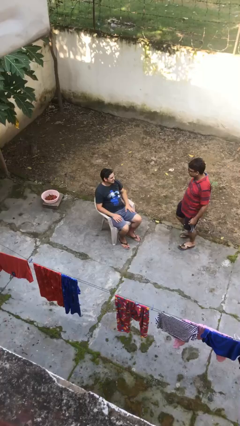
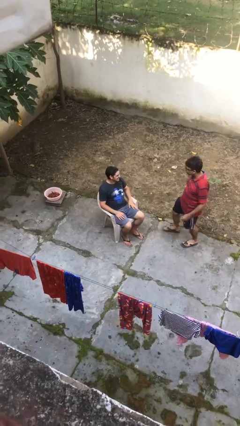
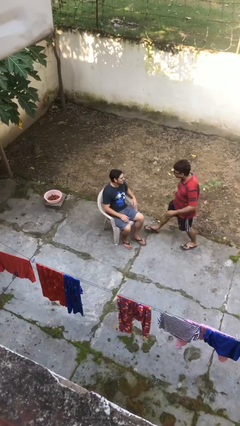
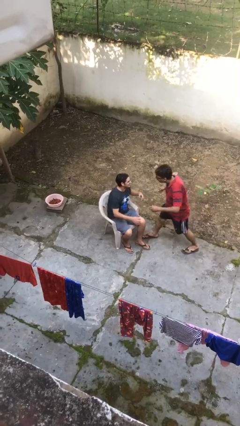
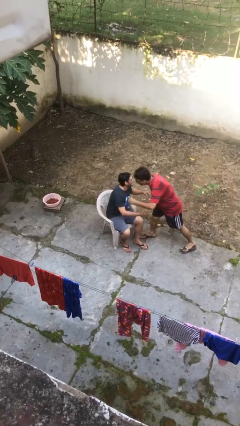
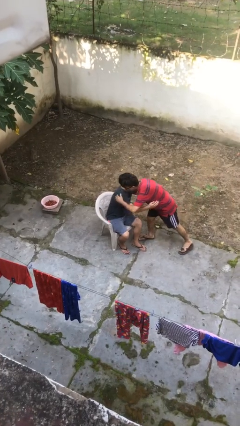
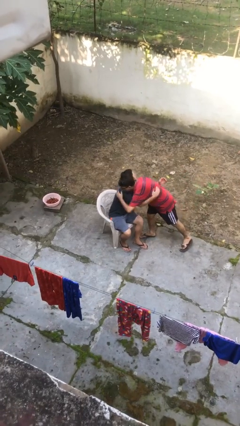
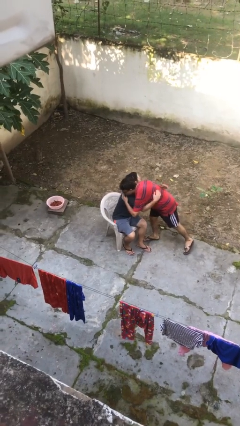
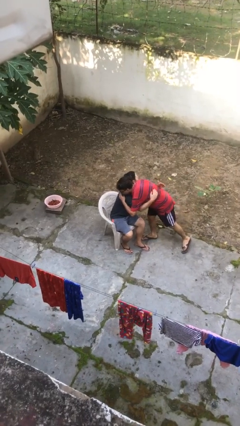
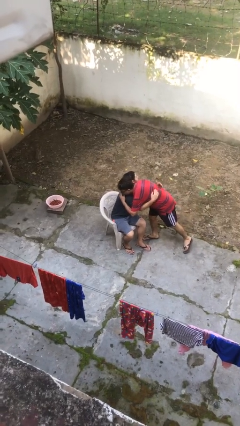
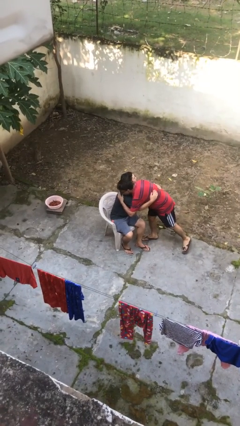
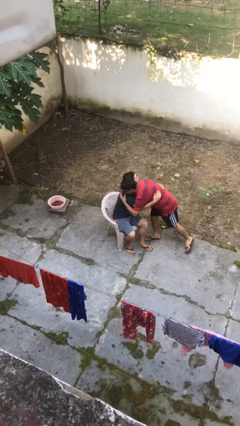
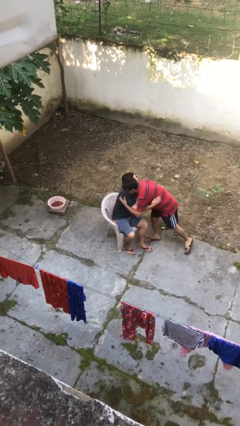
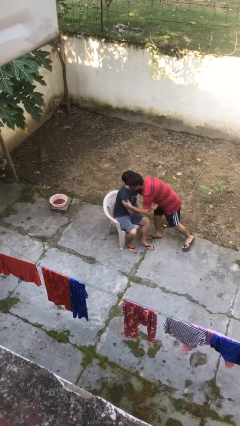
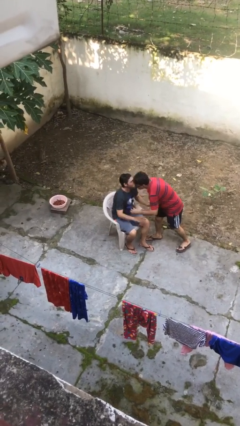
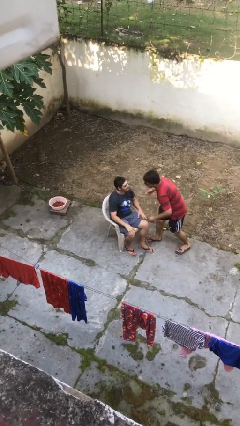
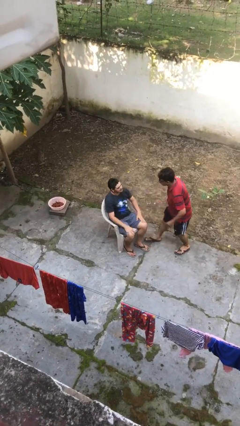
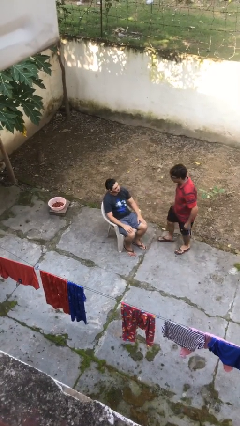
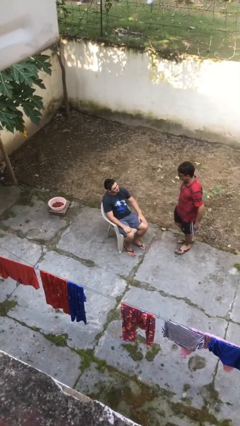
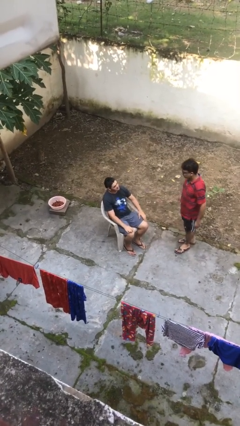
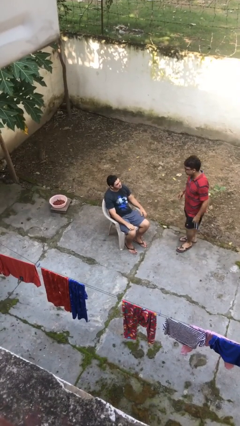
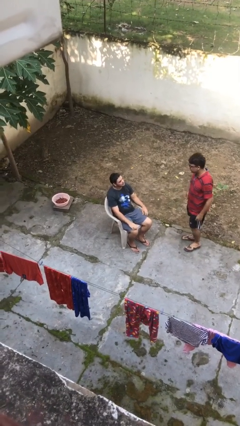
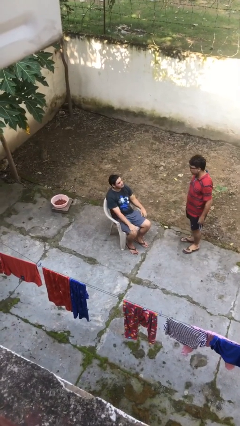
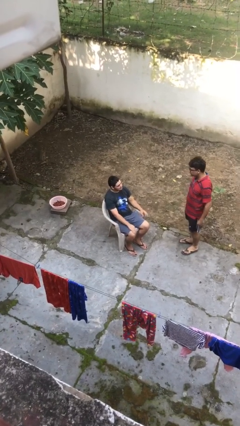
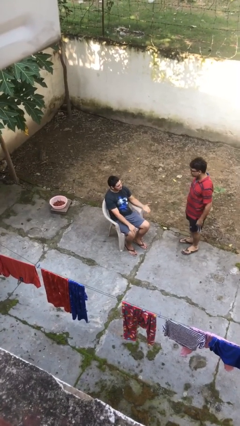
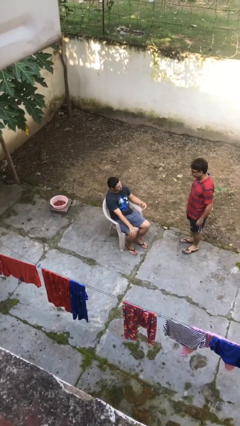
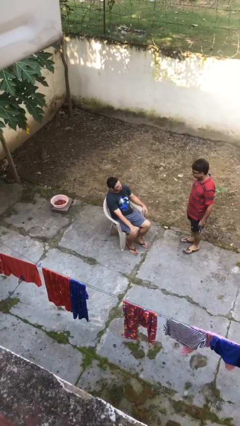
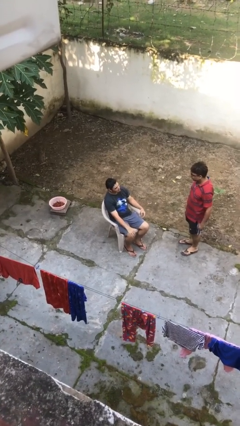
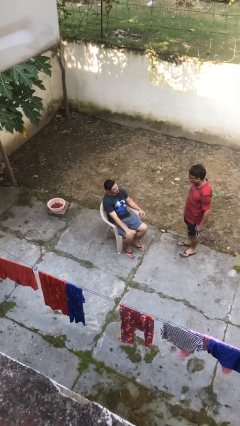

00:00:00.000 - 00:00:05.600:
person embraces person

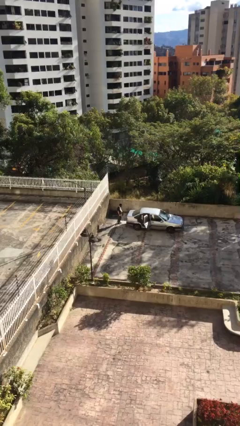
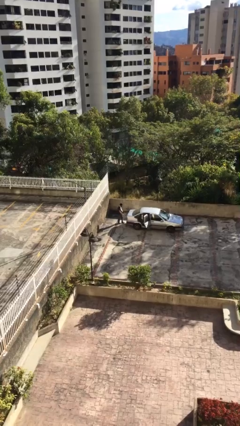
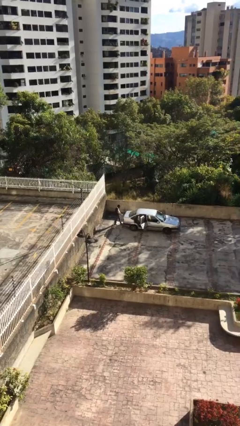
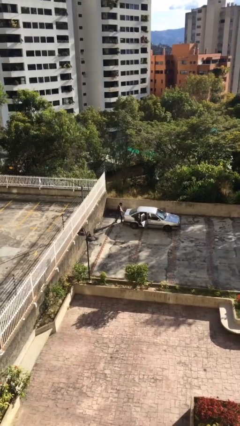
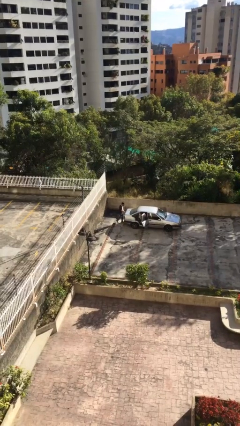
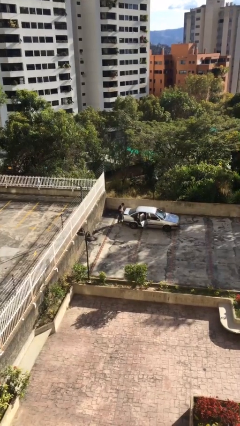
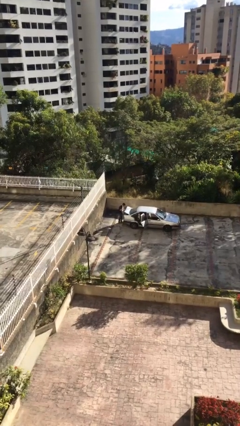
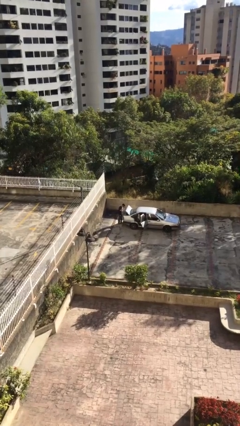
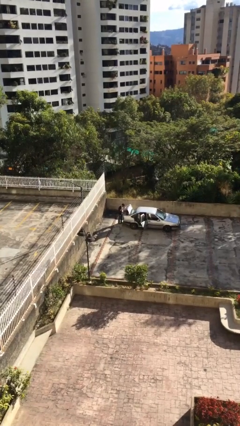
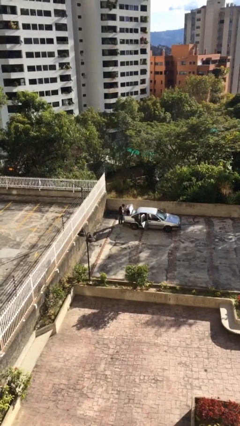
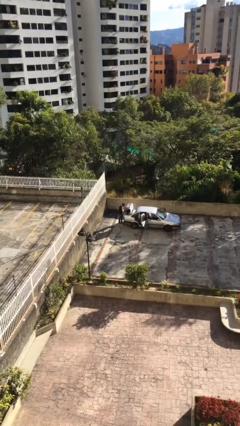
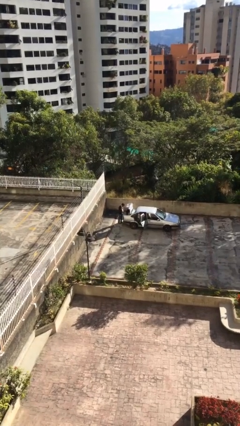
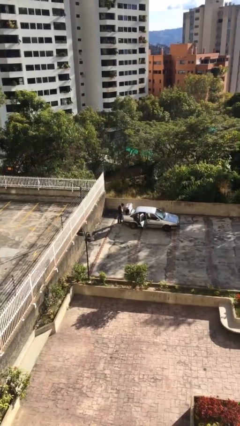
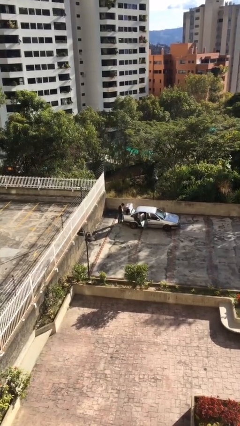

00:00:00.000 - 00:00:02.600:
person opens car trunk

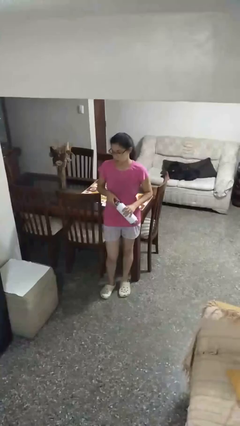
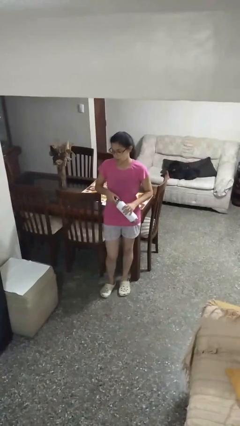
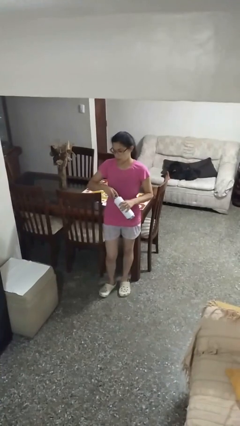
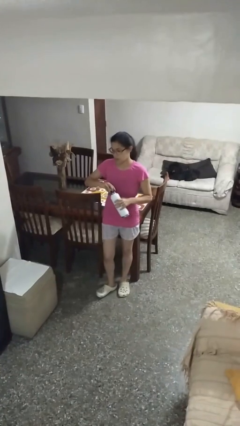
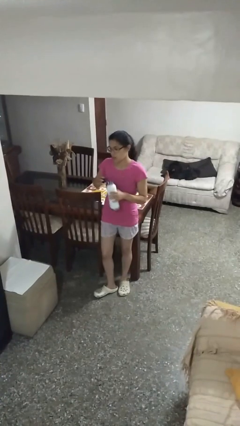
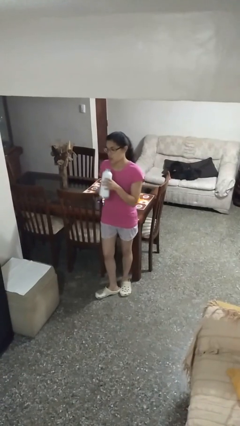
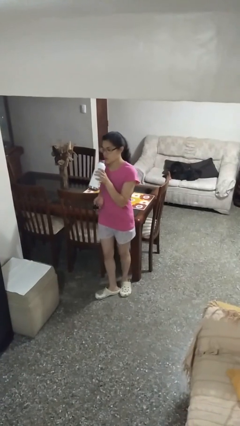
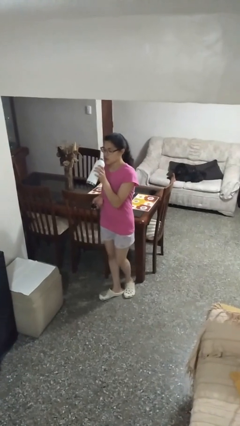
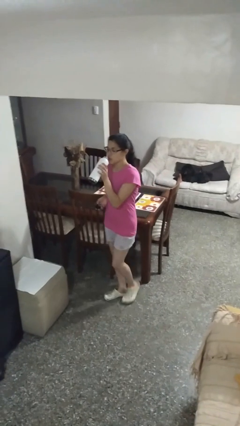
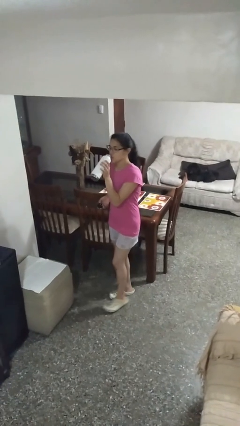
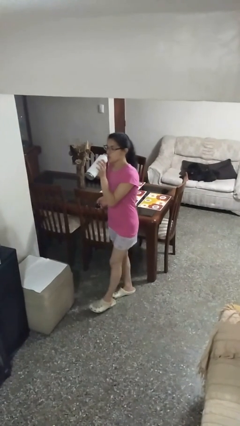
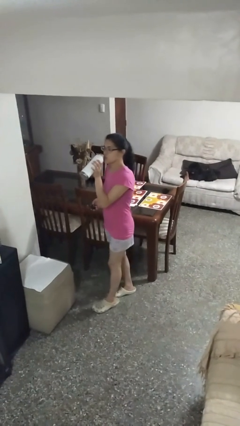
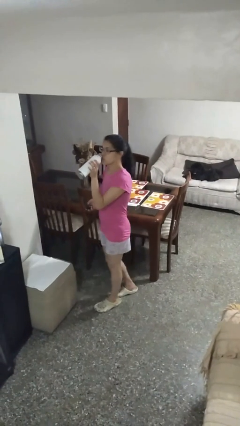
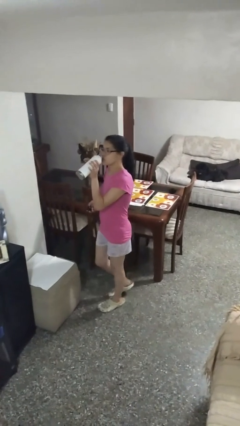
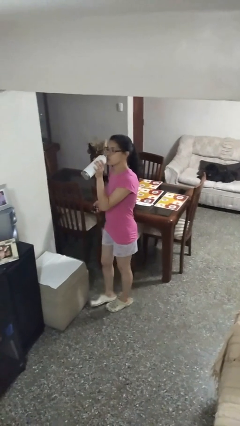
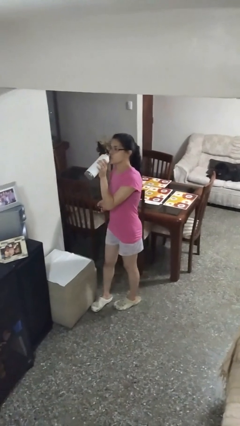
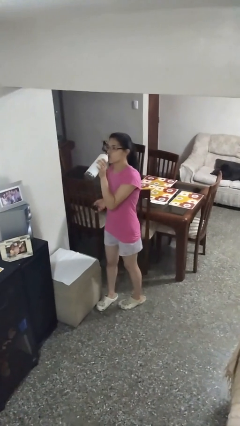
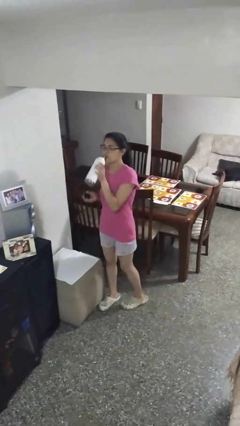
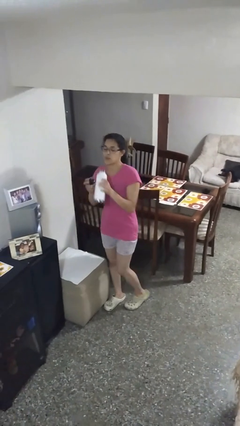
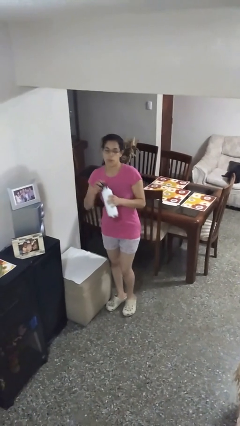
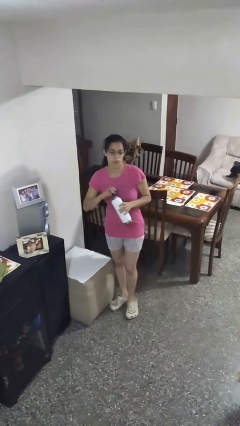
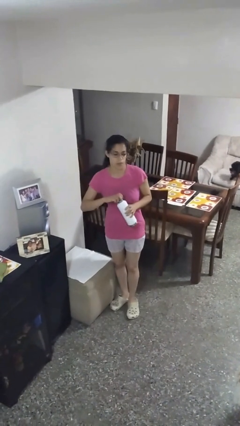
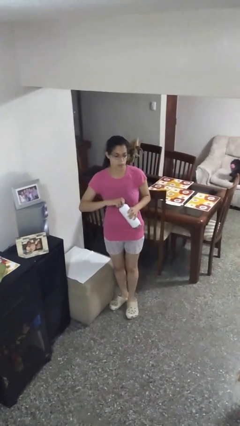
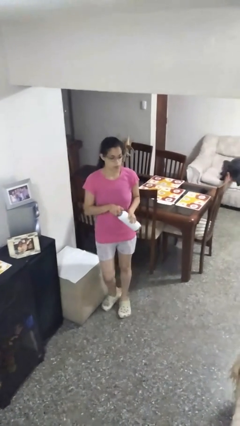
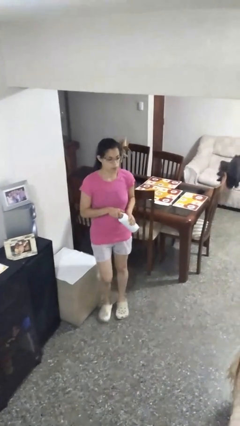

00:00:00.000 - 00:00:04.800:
person drinks from bottle

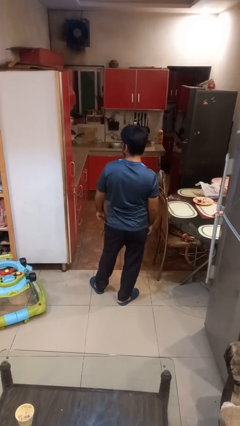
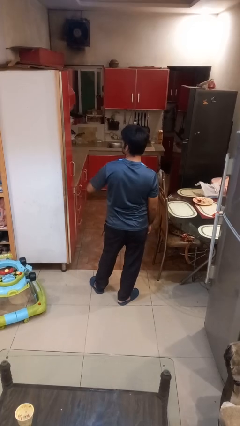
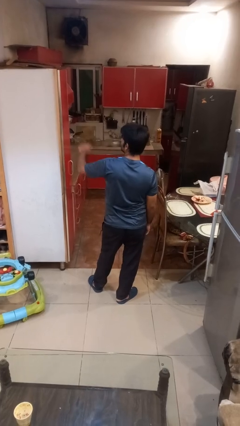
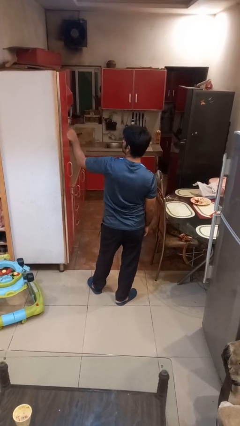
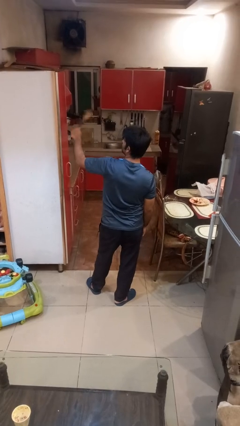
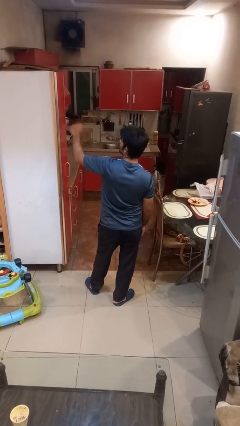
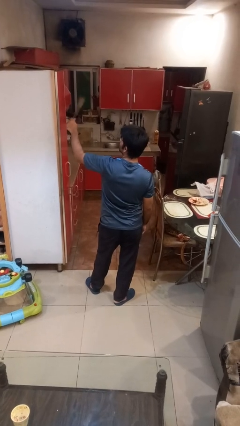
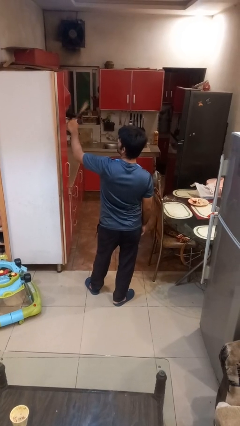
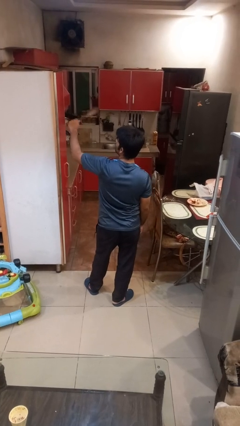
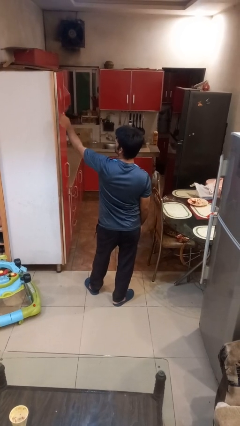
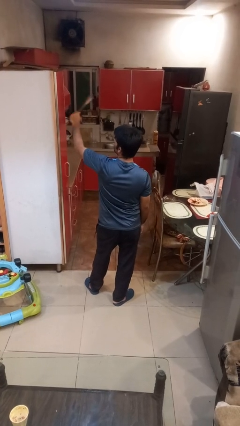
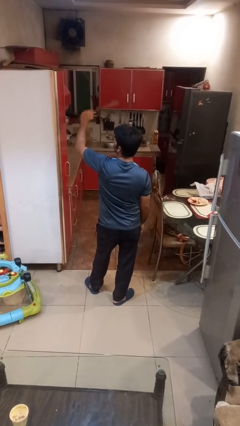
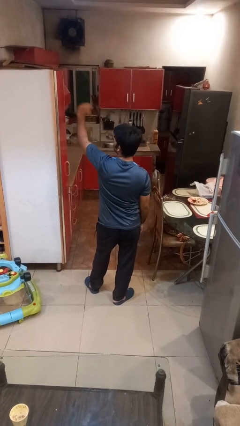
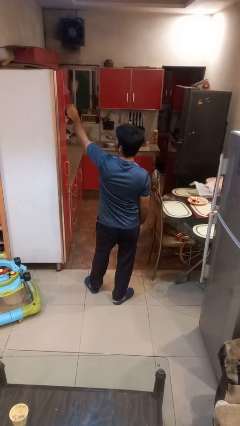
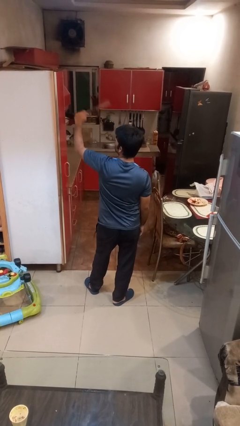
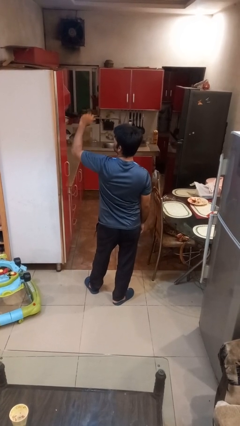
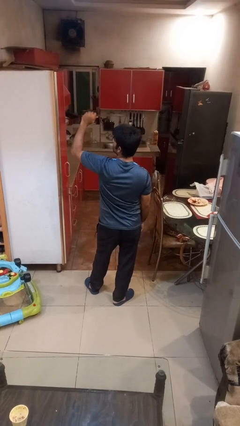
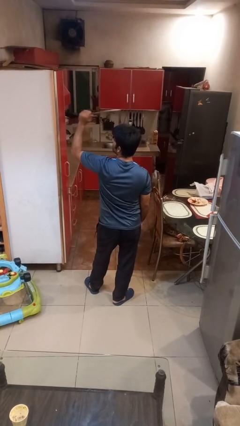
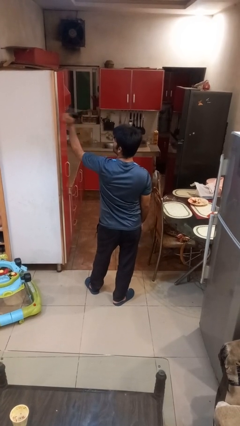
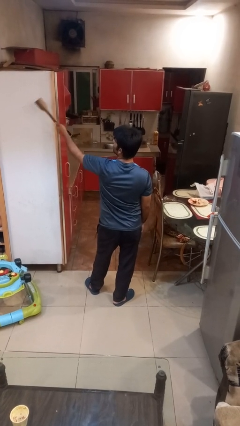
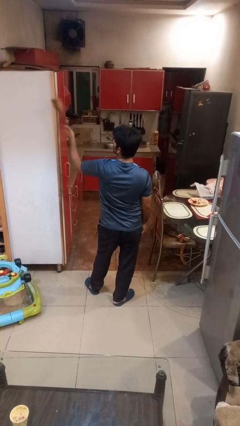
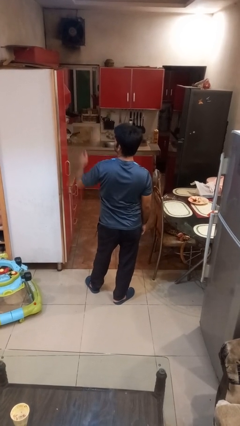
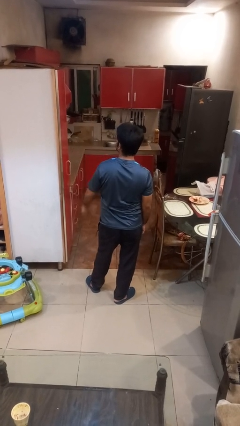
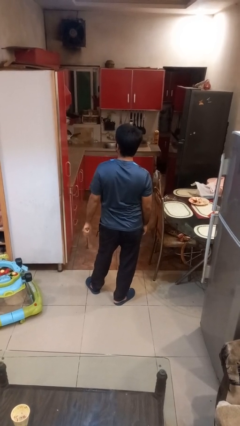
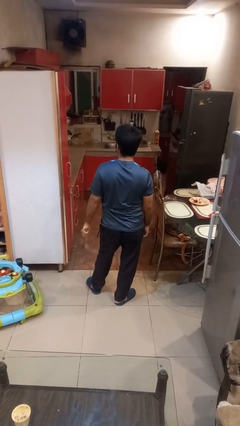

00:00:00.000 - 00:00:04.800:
person swats bug
